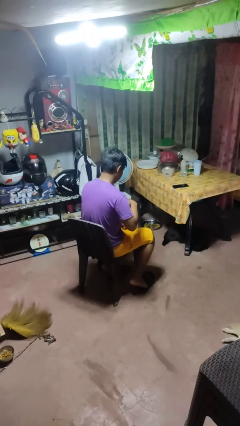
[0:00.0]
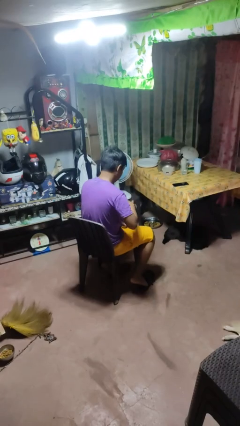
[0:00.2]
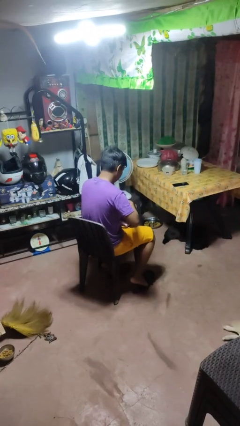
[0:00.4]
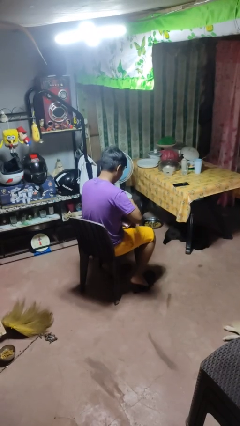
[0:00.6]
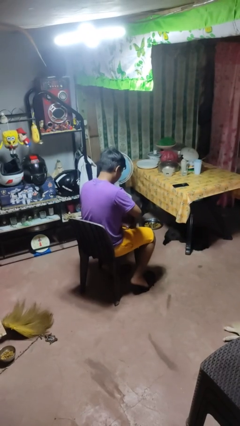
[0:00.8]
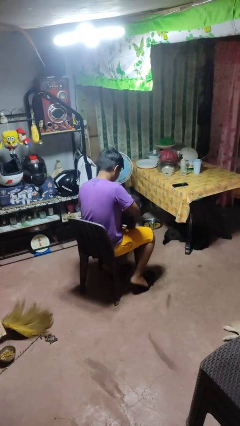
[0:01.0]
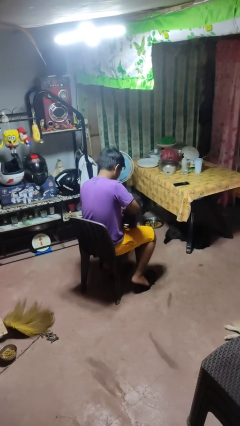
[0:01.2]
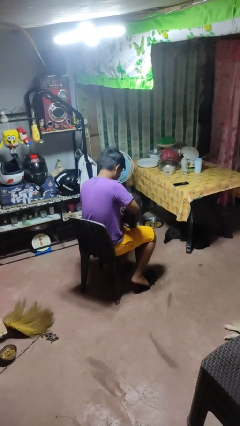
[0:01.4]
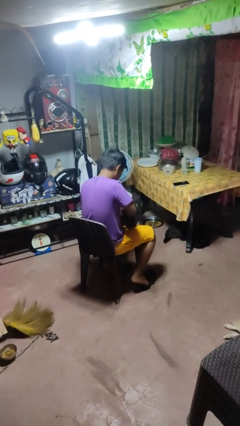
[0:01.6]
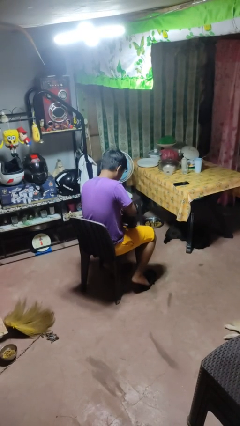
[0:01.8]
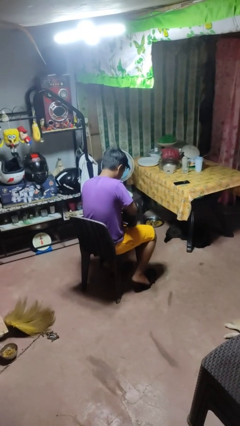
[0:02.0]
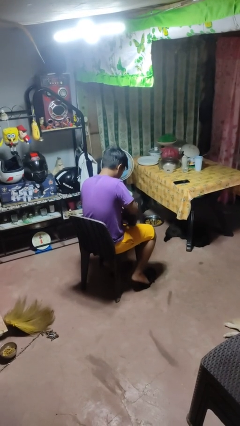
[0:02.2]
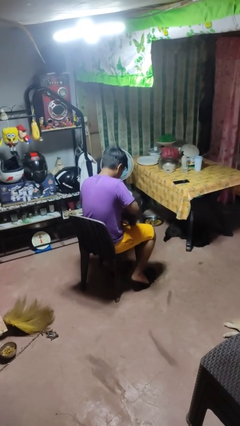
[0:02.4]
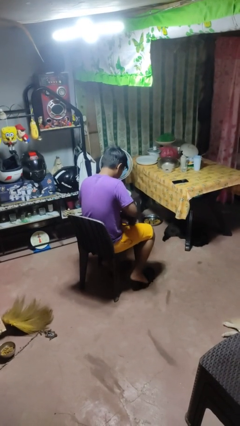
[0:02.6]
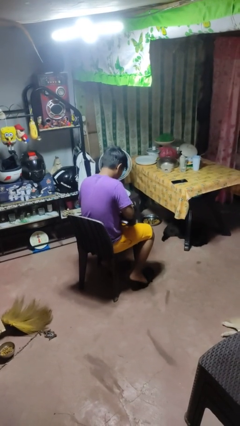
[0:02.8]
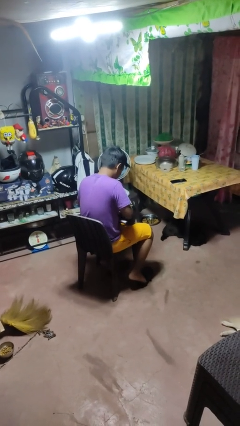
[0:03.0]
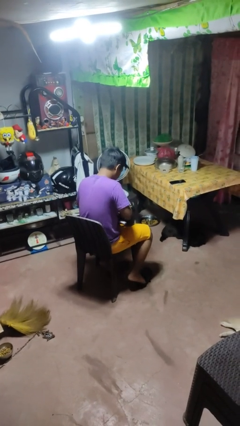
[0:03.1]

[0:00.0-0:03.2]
person searches in purse

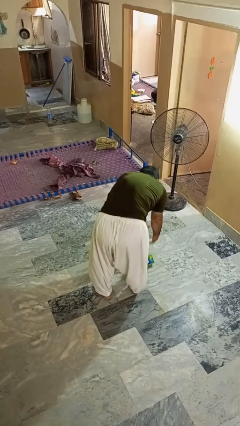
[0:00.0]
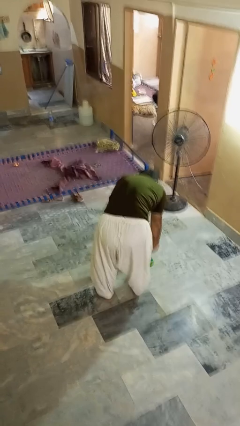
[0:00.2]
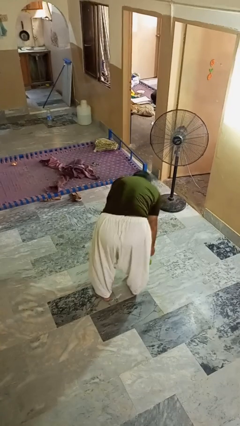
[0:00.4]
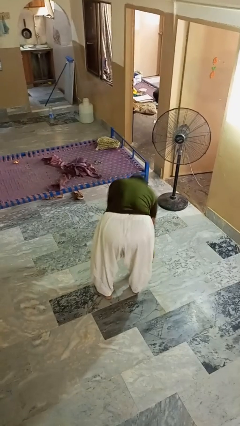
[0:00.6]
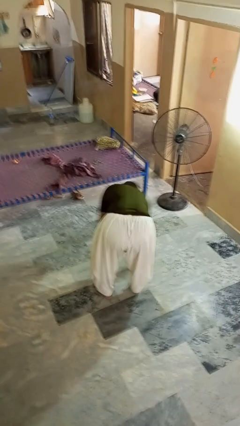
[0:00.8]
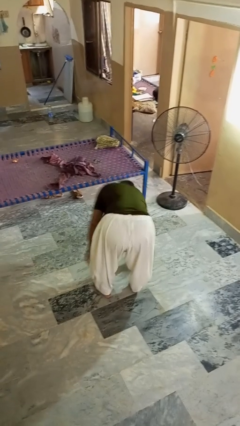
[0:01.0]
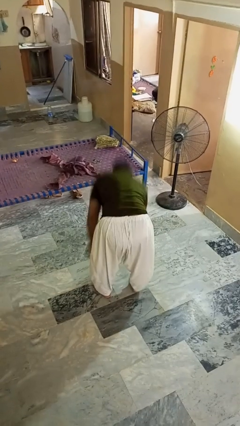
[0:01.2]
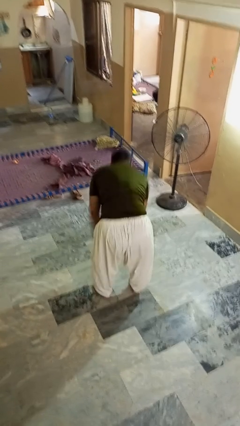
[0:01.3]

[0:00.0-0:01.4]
person picks up object from floor

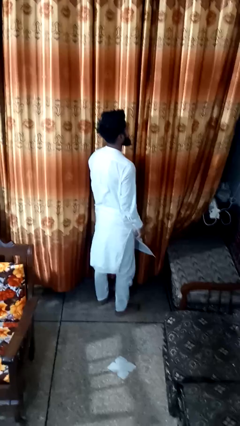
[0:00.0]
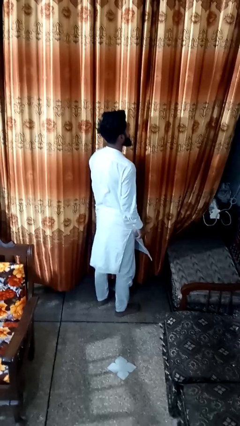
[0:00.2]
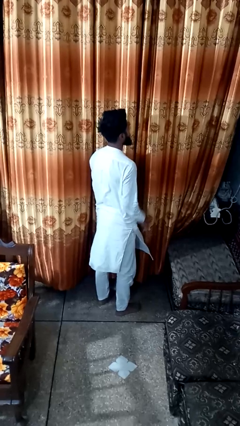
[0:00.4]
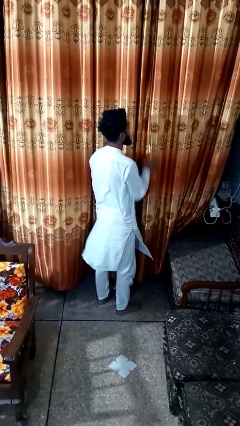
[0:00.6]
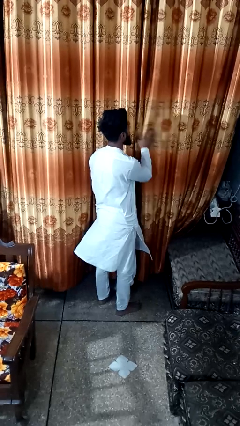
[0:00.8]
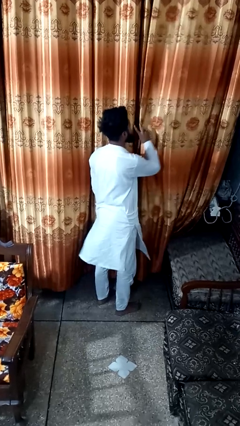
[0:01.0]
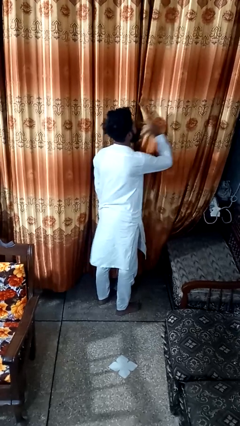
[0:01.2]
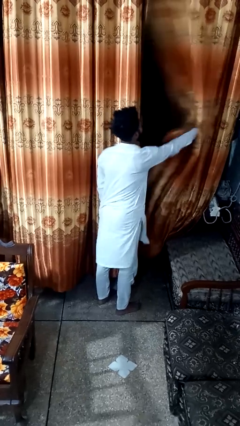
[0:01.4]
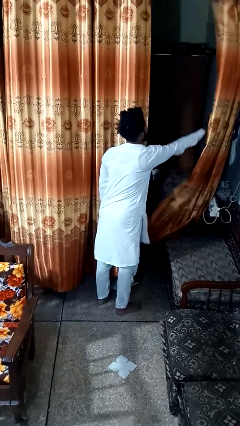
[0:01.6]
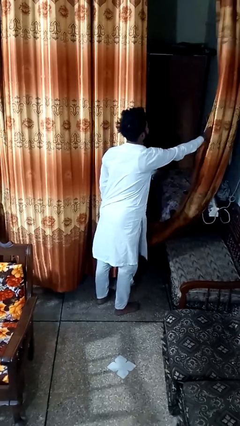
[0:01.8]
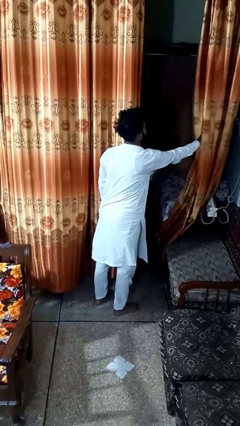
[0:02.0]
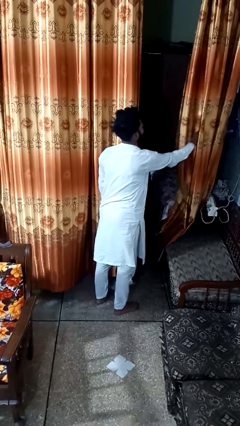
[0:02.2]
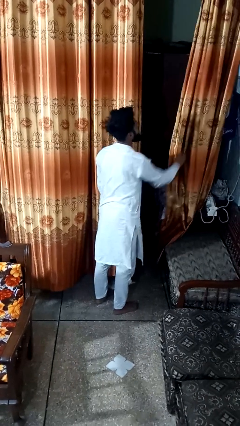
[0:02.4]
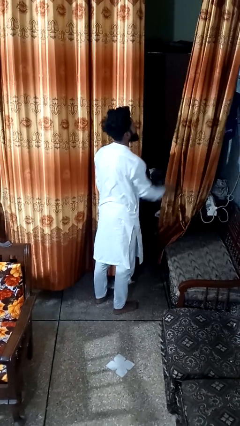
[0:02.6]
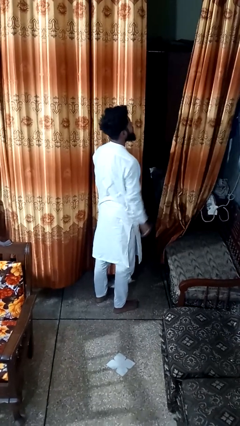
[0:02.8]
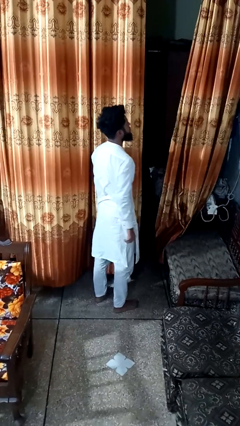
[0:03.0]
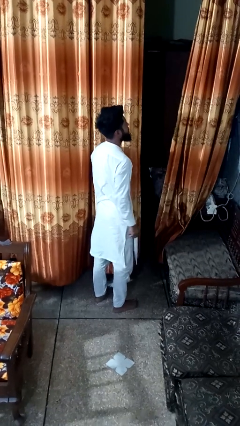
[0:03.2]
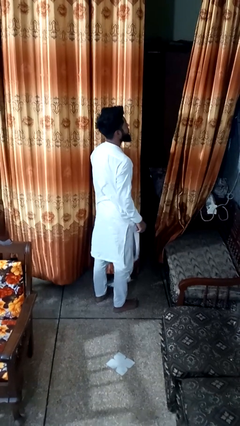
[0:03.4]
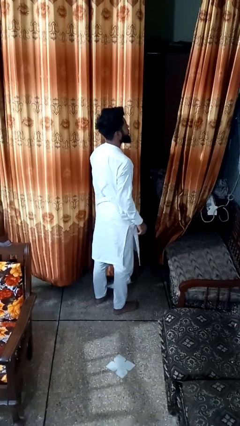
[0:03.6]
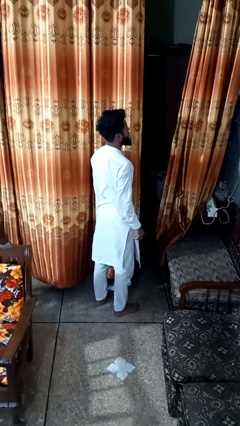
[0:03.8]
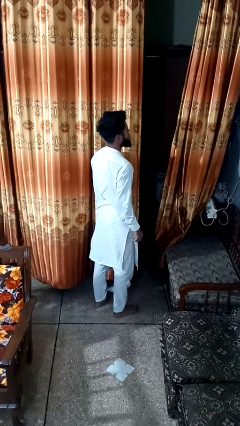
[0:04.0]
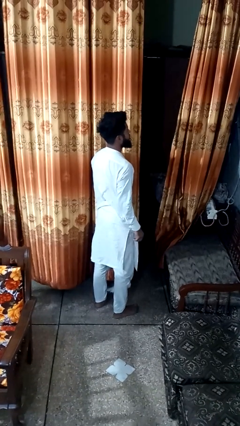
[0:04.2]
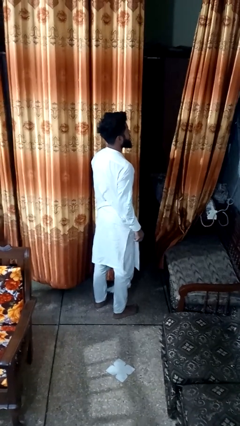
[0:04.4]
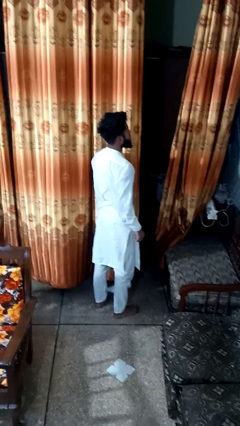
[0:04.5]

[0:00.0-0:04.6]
person opens curtains

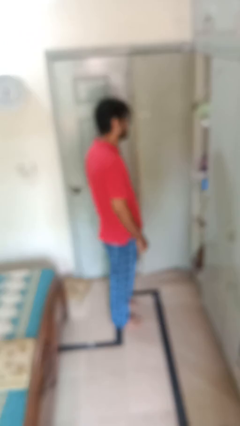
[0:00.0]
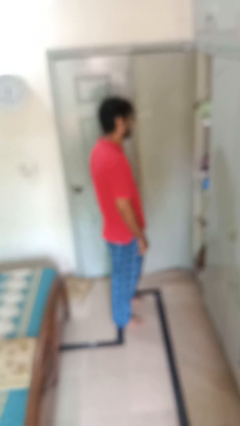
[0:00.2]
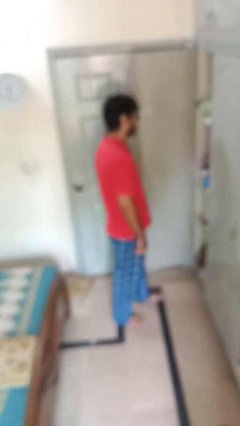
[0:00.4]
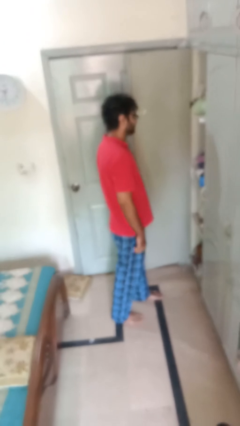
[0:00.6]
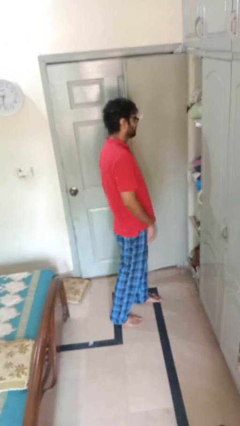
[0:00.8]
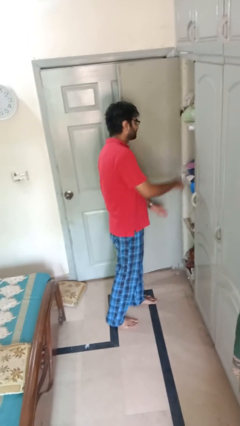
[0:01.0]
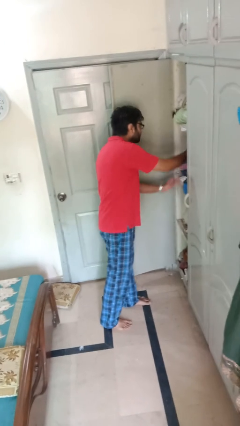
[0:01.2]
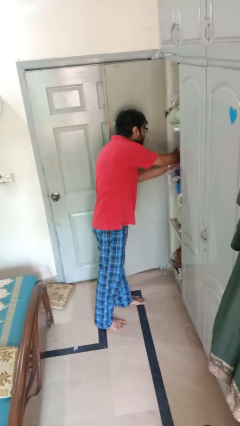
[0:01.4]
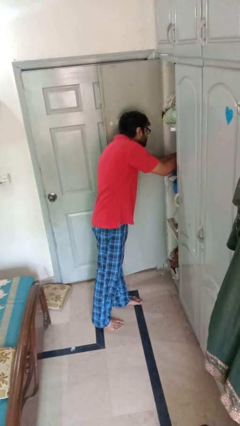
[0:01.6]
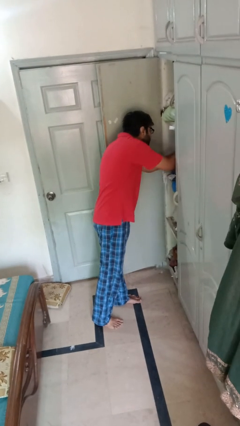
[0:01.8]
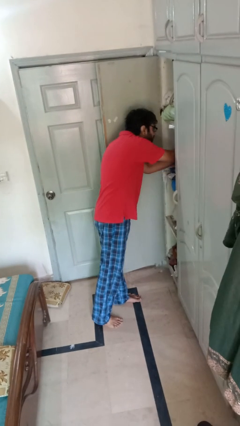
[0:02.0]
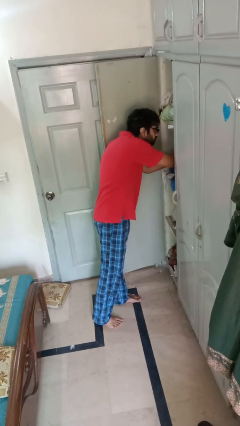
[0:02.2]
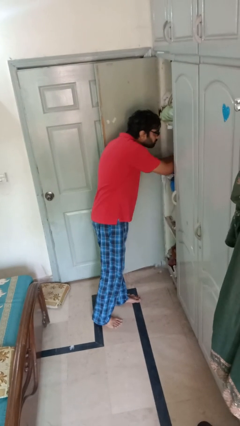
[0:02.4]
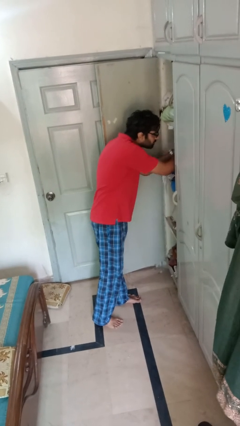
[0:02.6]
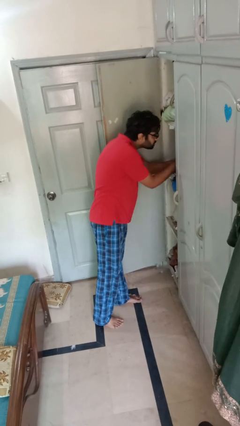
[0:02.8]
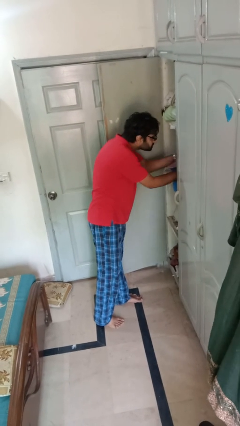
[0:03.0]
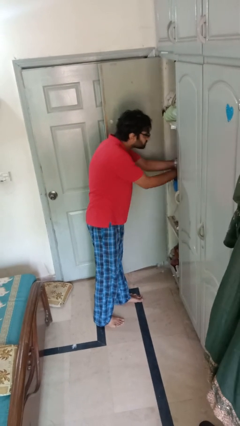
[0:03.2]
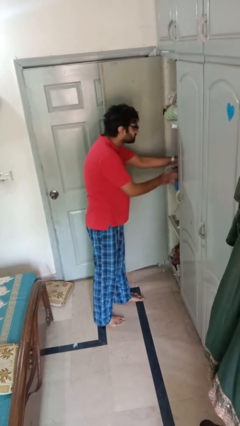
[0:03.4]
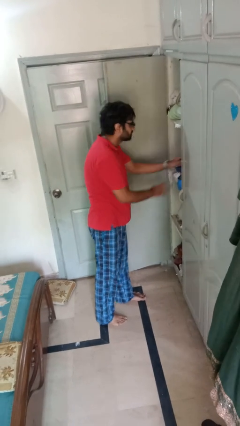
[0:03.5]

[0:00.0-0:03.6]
person searches in cabinet

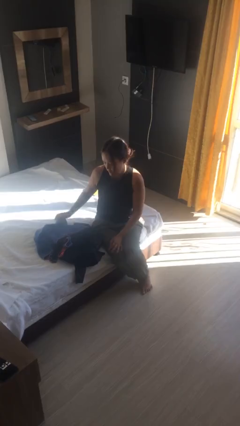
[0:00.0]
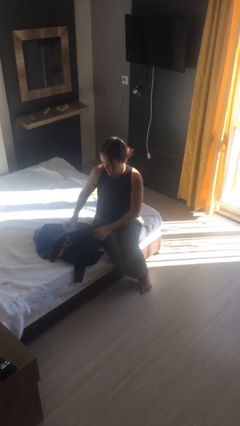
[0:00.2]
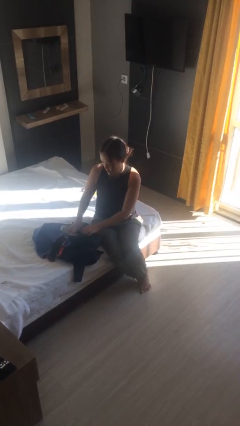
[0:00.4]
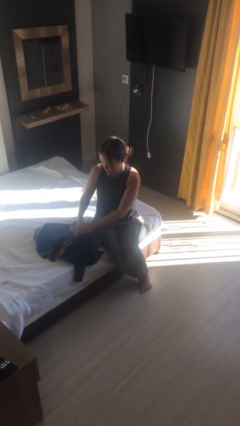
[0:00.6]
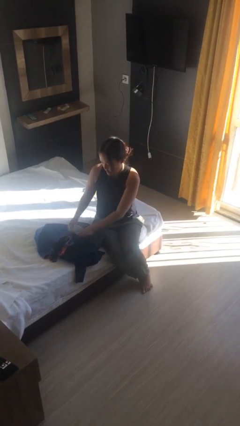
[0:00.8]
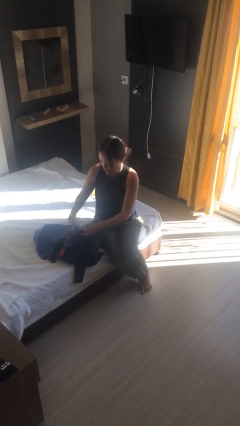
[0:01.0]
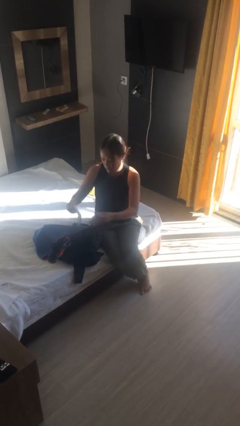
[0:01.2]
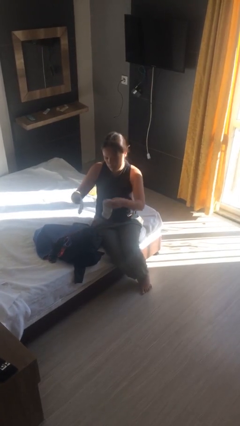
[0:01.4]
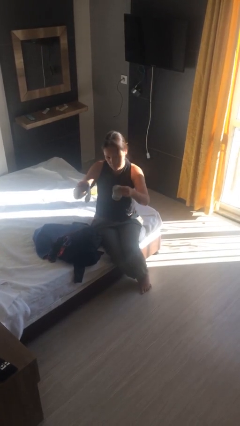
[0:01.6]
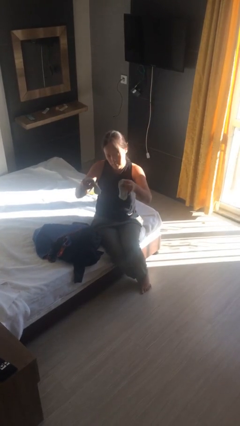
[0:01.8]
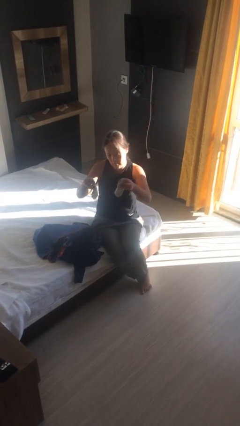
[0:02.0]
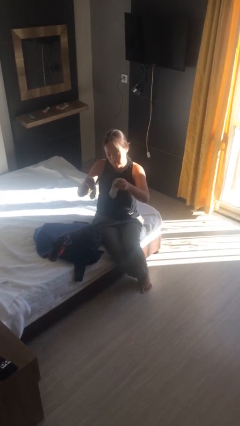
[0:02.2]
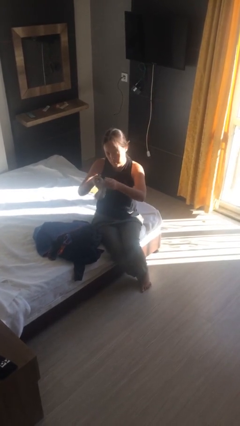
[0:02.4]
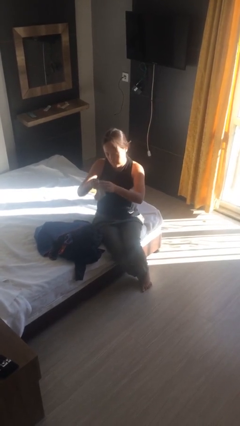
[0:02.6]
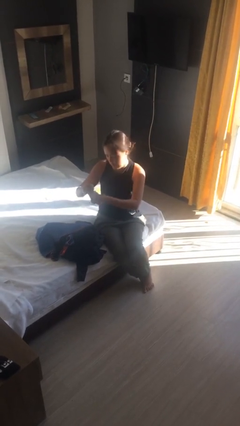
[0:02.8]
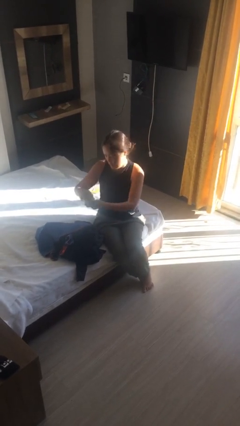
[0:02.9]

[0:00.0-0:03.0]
person folds shirt

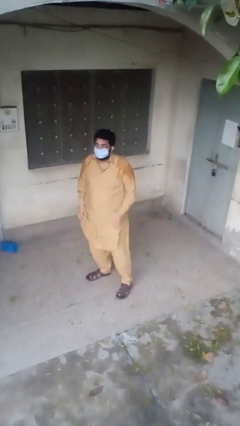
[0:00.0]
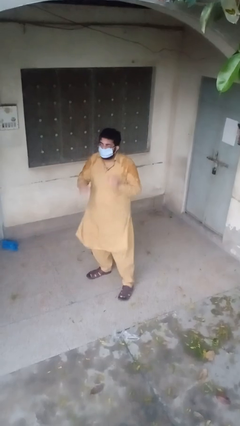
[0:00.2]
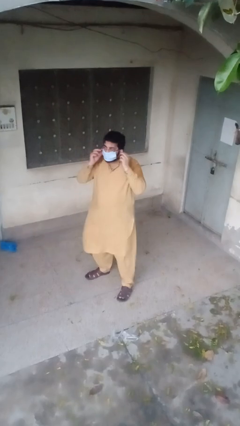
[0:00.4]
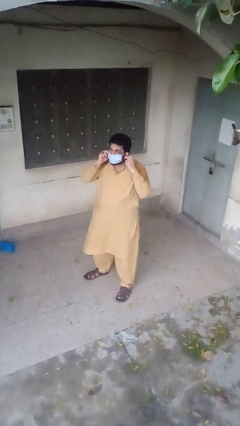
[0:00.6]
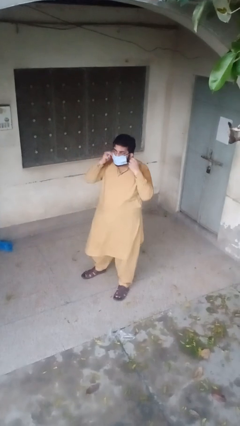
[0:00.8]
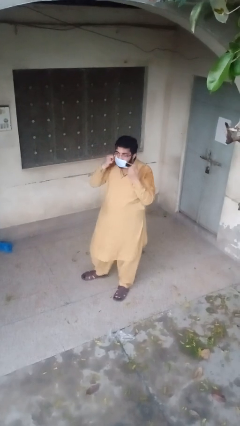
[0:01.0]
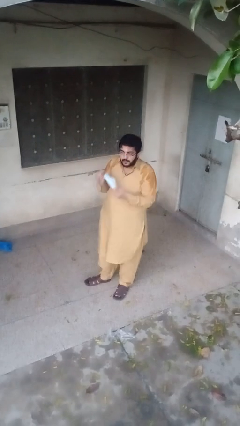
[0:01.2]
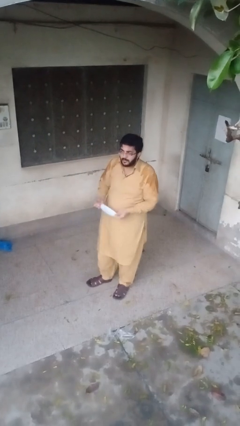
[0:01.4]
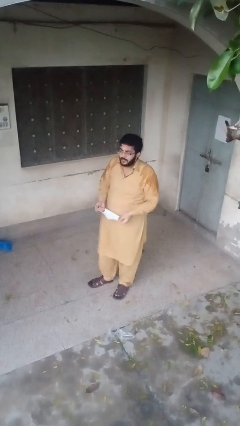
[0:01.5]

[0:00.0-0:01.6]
person takes off facemask
